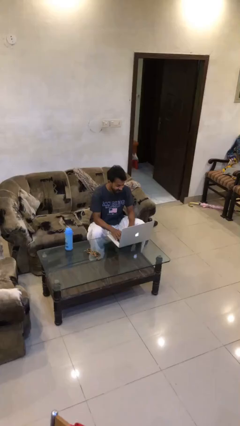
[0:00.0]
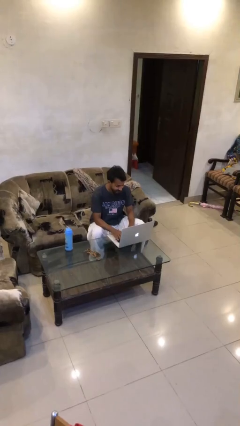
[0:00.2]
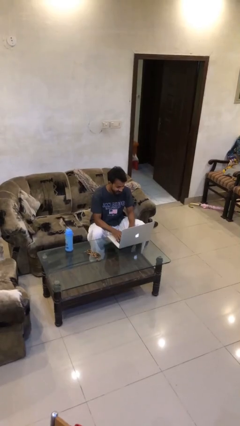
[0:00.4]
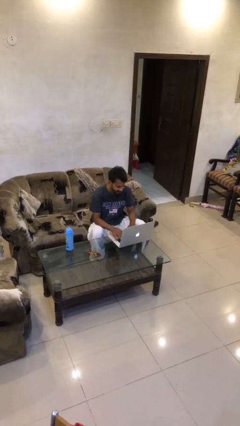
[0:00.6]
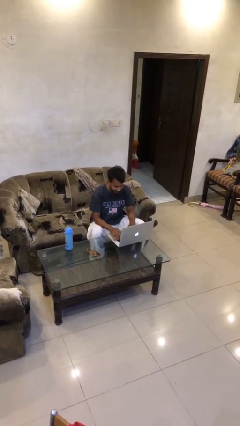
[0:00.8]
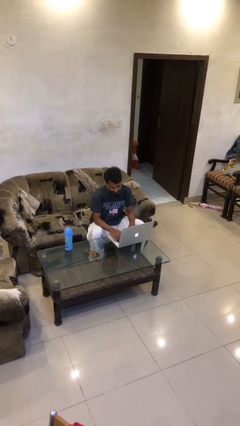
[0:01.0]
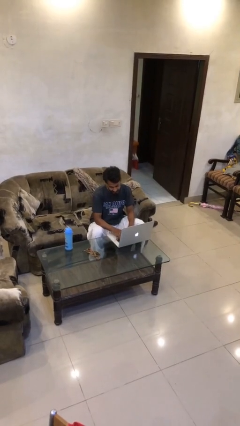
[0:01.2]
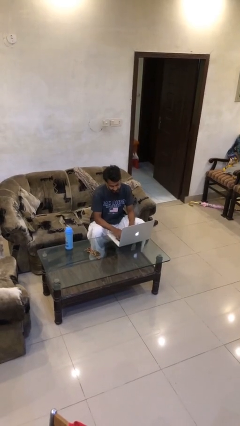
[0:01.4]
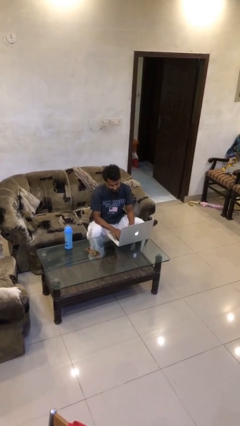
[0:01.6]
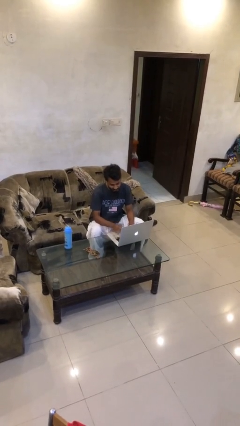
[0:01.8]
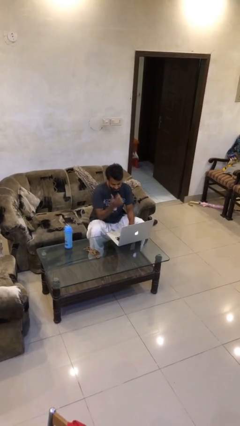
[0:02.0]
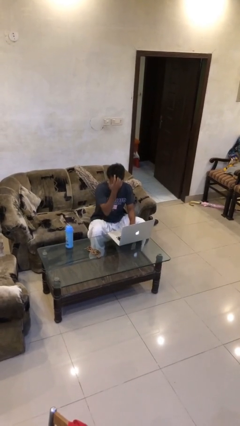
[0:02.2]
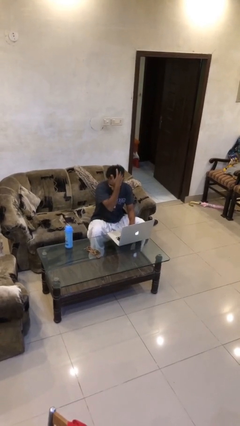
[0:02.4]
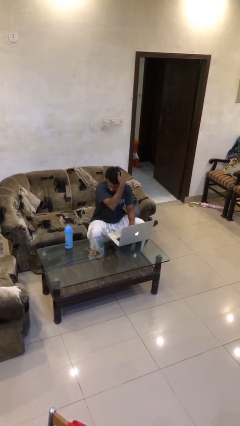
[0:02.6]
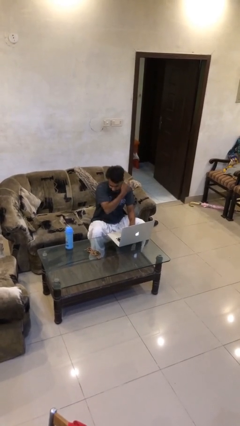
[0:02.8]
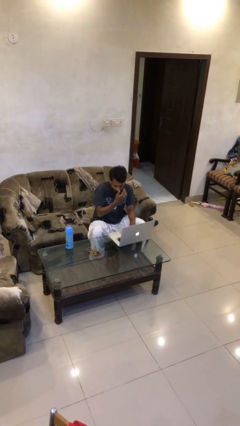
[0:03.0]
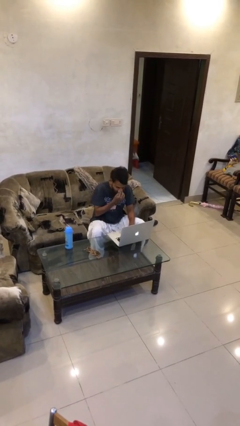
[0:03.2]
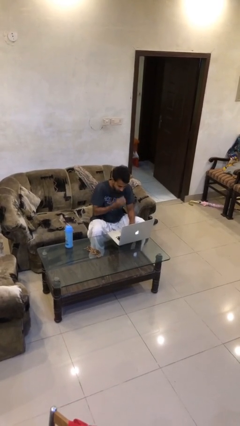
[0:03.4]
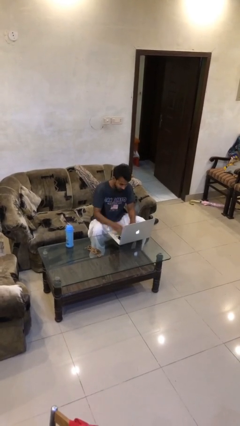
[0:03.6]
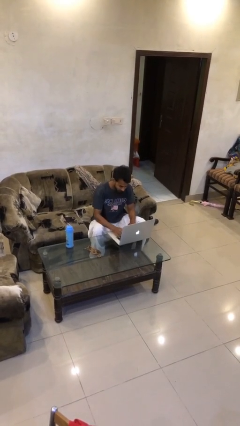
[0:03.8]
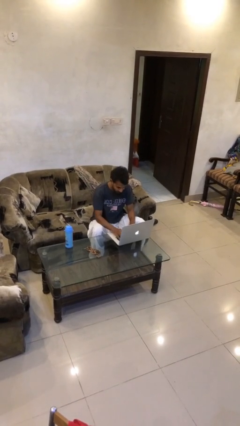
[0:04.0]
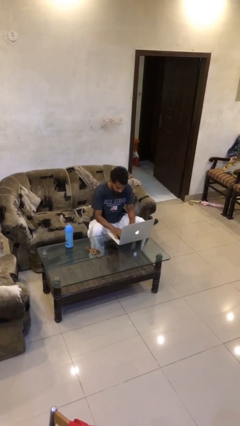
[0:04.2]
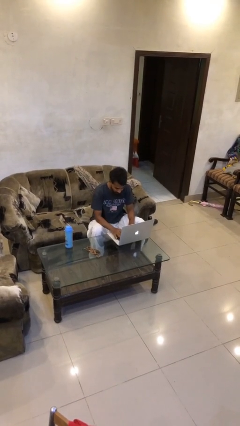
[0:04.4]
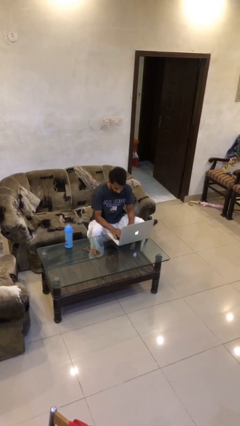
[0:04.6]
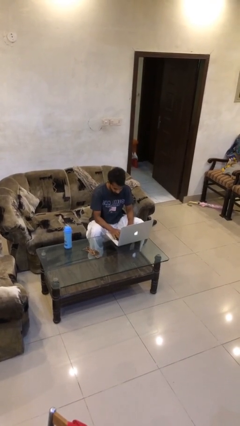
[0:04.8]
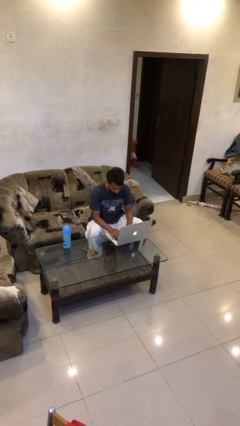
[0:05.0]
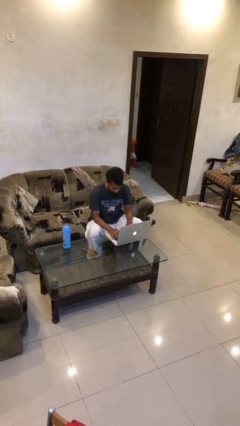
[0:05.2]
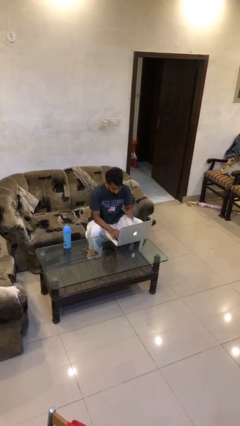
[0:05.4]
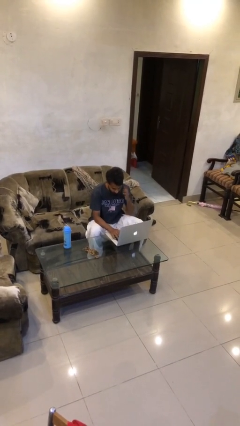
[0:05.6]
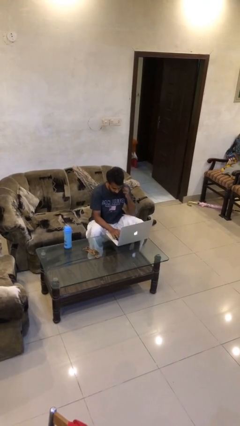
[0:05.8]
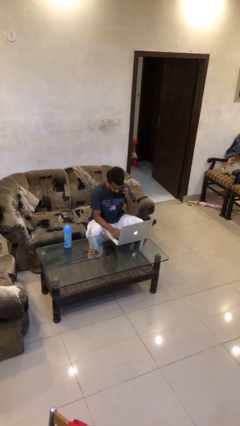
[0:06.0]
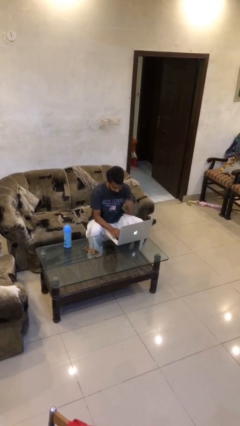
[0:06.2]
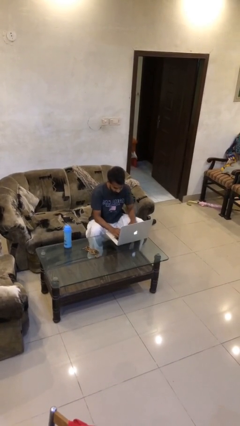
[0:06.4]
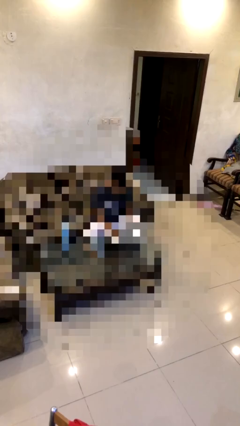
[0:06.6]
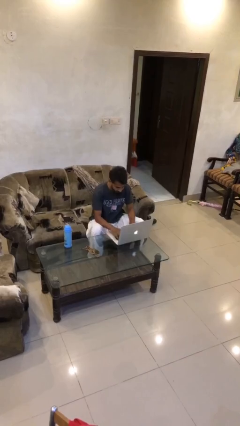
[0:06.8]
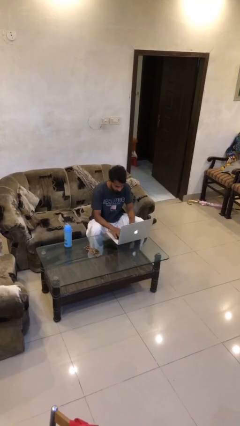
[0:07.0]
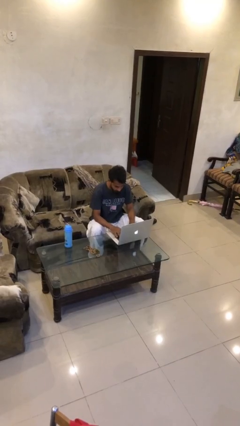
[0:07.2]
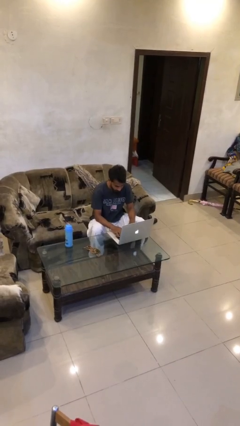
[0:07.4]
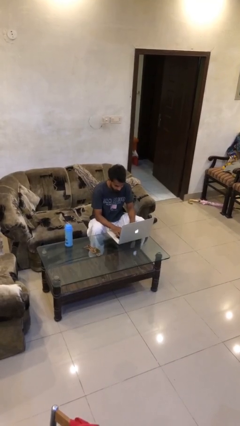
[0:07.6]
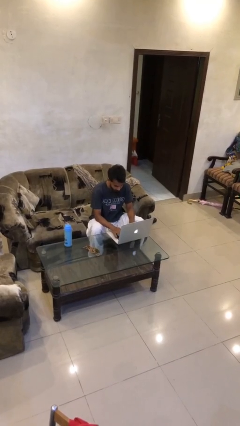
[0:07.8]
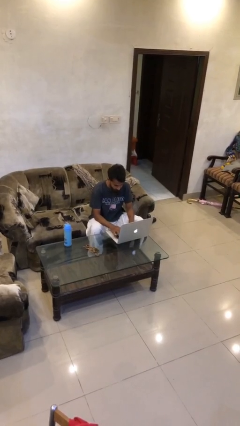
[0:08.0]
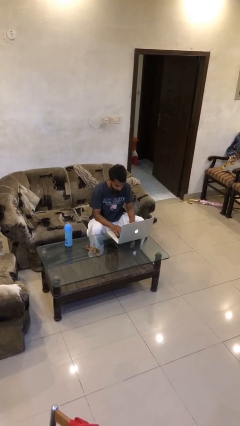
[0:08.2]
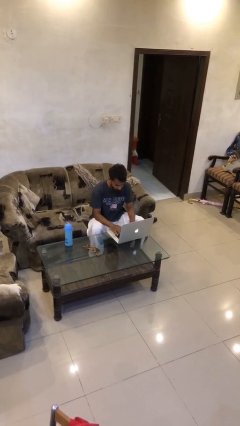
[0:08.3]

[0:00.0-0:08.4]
person interacts with laptop

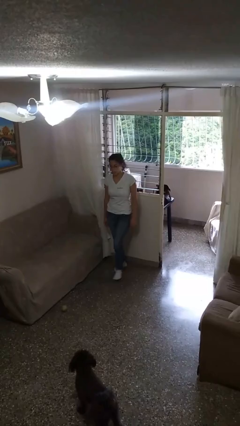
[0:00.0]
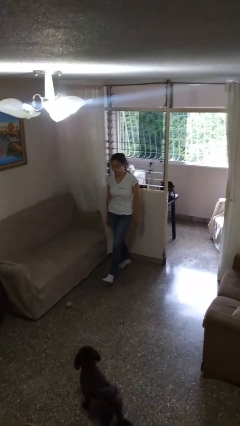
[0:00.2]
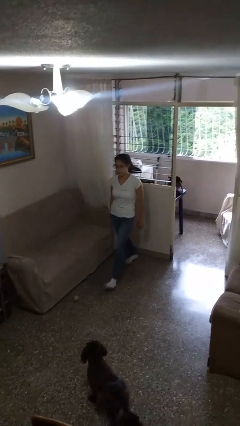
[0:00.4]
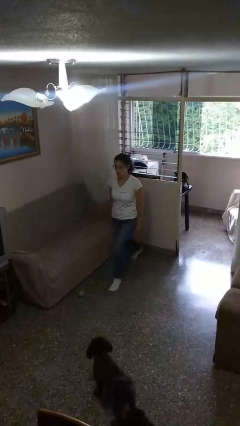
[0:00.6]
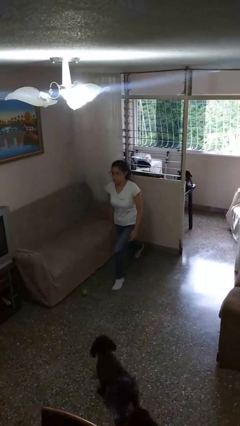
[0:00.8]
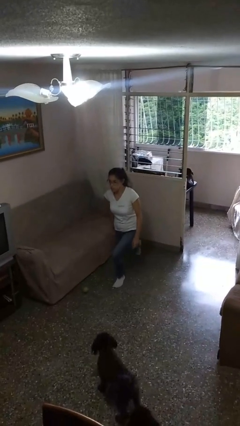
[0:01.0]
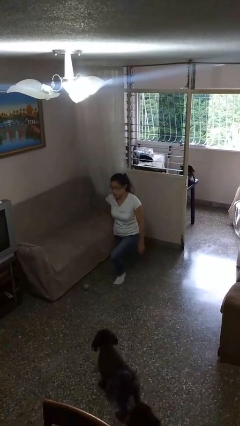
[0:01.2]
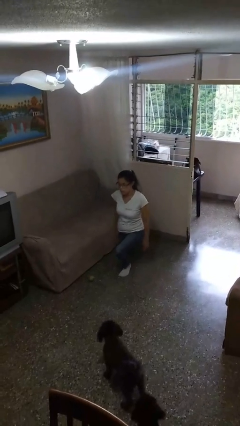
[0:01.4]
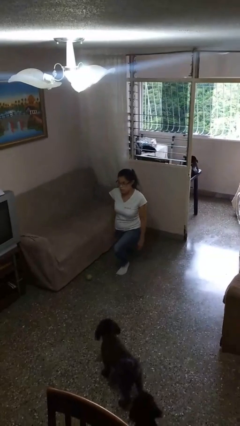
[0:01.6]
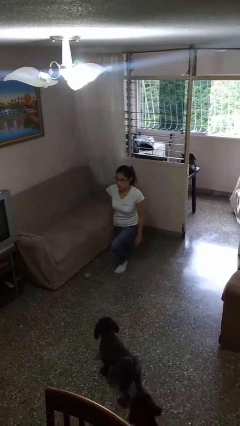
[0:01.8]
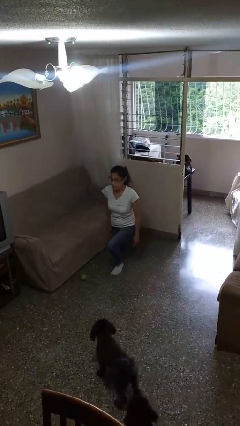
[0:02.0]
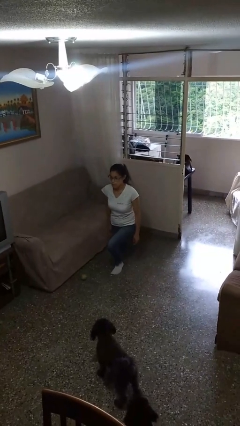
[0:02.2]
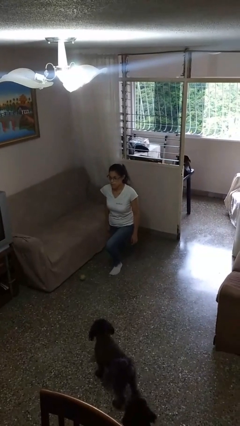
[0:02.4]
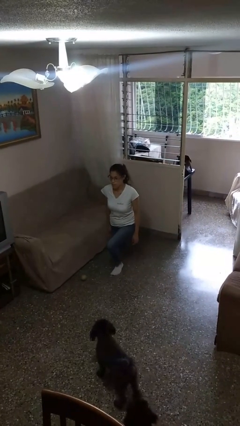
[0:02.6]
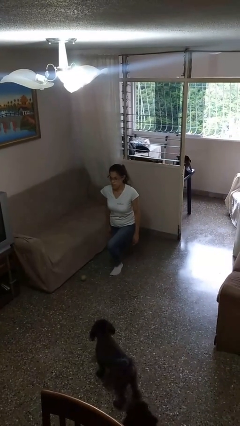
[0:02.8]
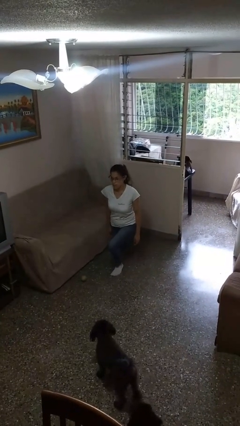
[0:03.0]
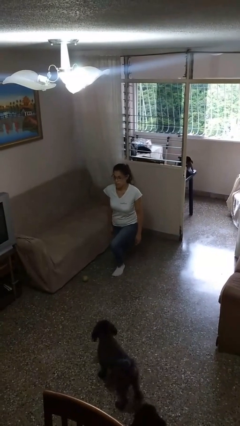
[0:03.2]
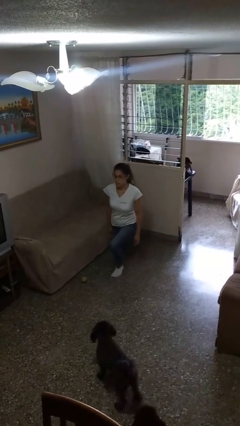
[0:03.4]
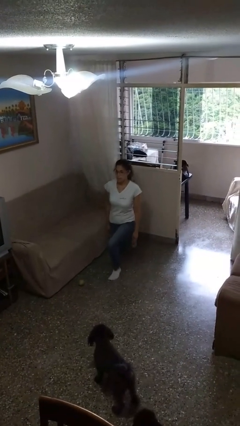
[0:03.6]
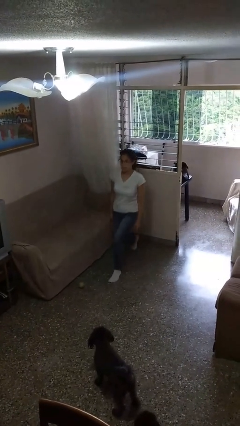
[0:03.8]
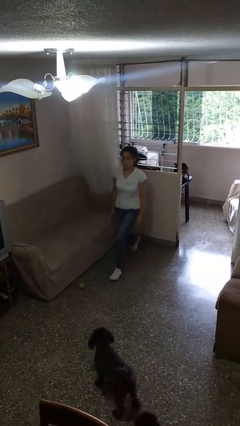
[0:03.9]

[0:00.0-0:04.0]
person exercises with lunges

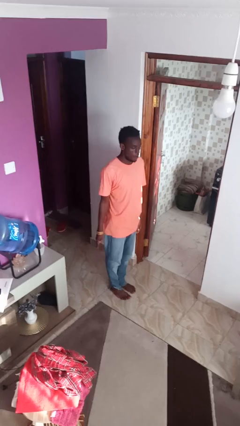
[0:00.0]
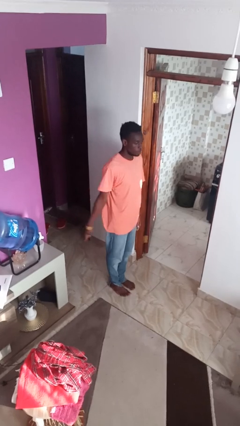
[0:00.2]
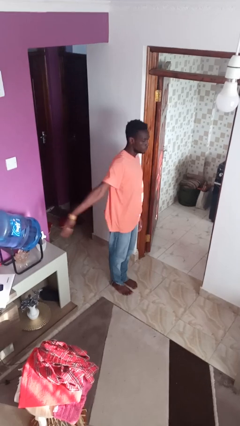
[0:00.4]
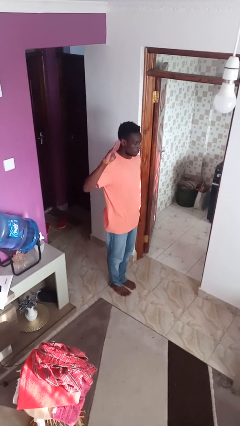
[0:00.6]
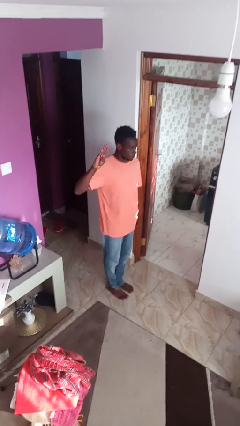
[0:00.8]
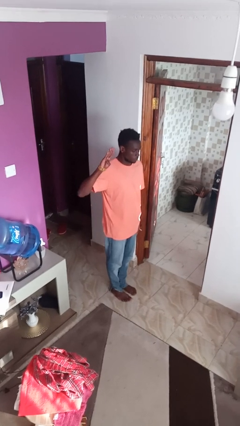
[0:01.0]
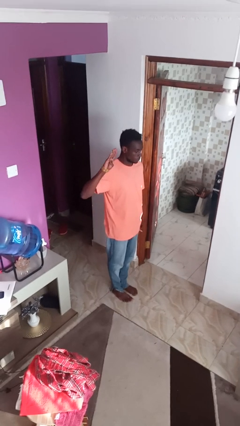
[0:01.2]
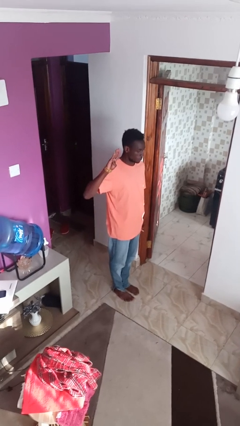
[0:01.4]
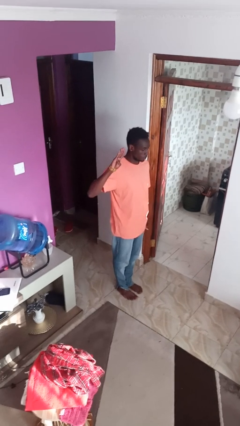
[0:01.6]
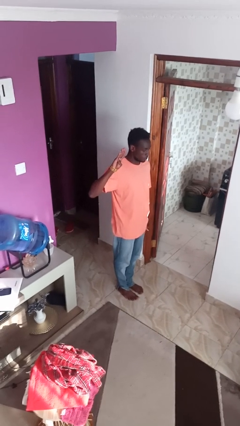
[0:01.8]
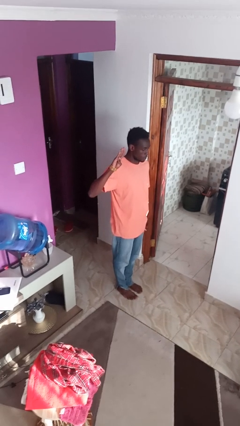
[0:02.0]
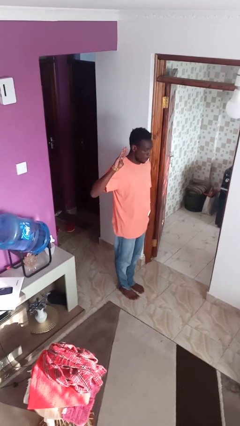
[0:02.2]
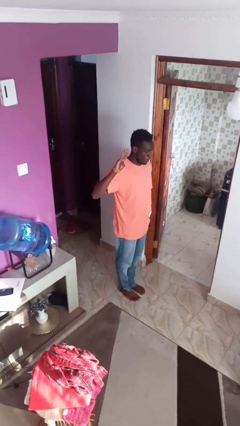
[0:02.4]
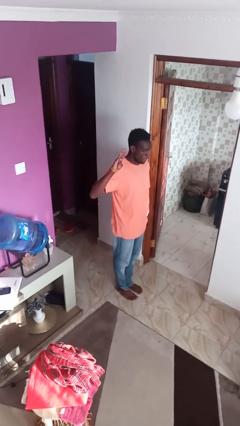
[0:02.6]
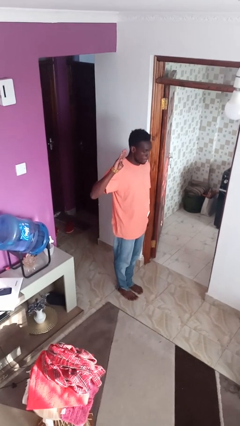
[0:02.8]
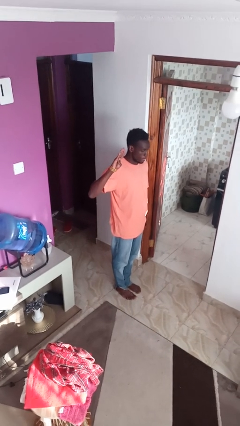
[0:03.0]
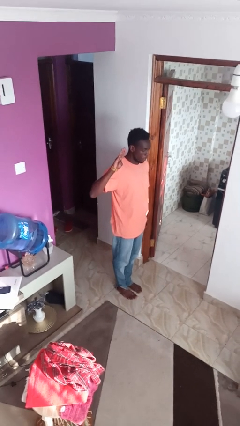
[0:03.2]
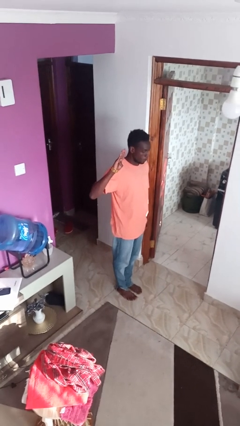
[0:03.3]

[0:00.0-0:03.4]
person salutes

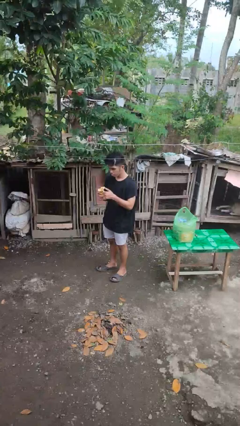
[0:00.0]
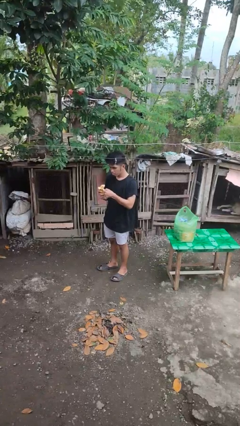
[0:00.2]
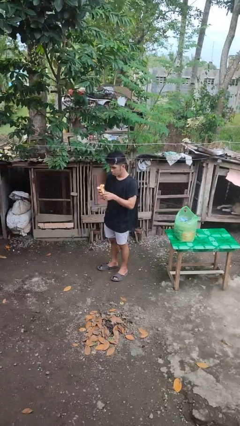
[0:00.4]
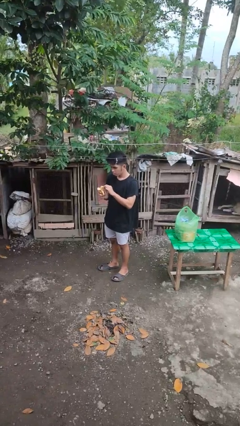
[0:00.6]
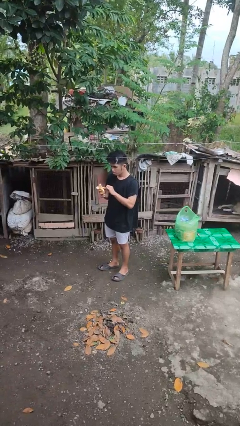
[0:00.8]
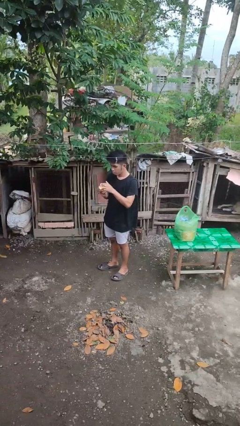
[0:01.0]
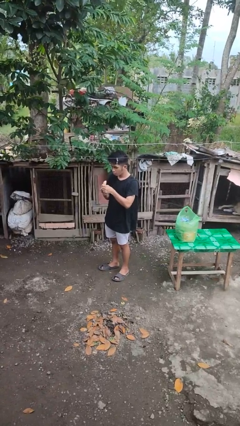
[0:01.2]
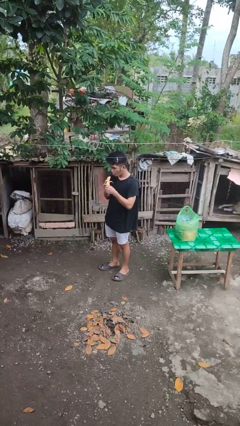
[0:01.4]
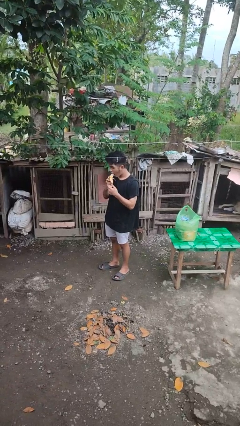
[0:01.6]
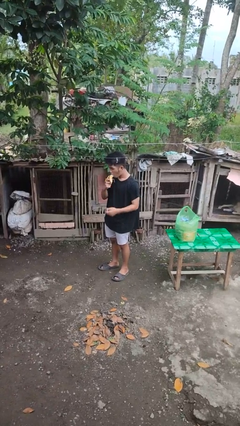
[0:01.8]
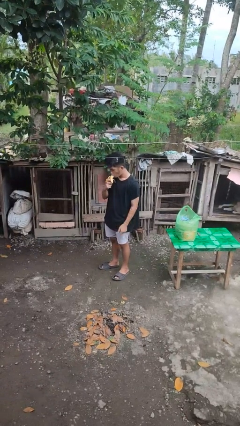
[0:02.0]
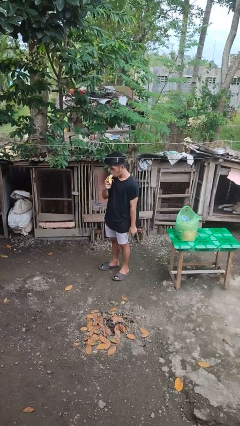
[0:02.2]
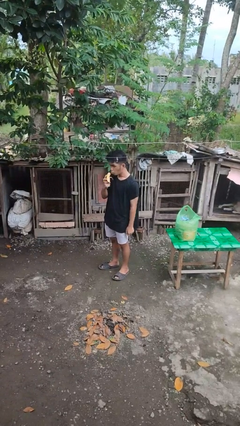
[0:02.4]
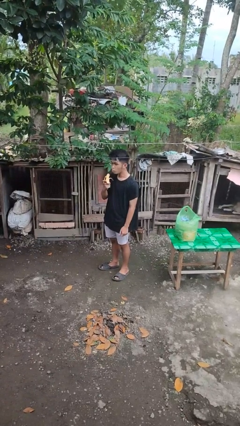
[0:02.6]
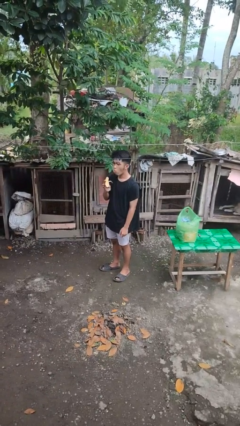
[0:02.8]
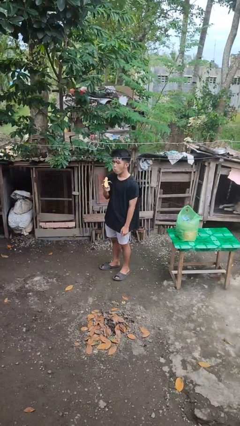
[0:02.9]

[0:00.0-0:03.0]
person eats banana
